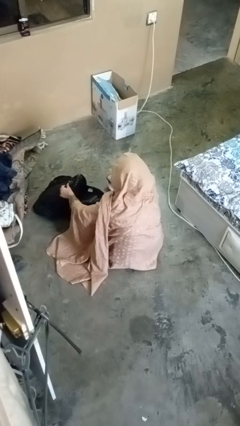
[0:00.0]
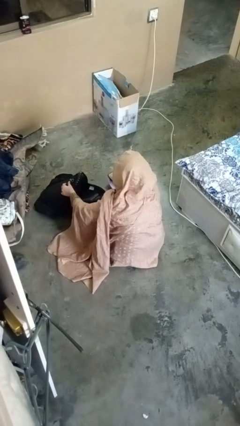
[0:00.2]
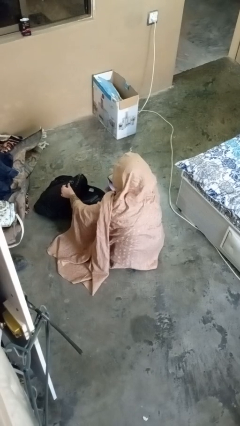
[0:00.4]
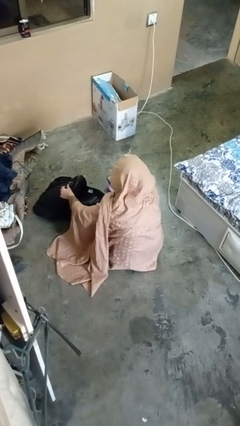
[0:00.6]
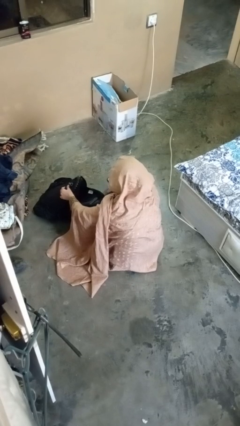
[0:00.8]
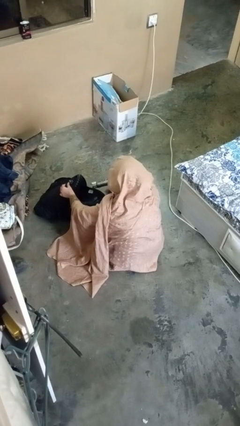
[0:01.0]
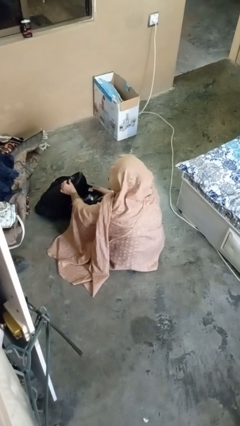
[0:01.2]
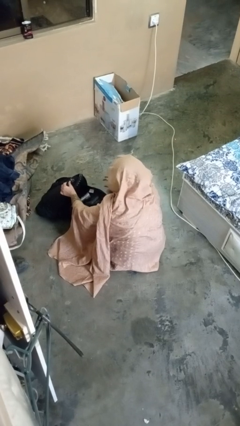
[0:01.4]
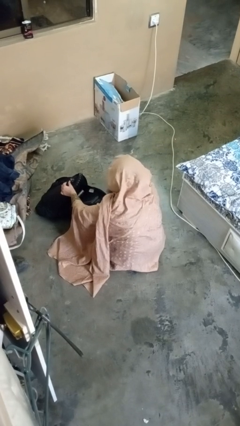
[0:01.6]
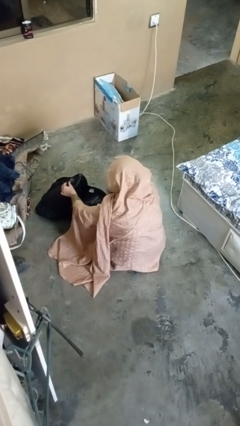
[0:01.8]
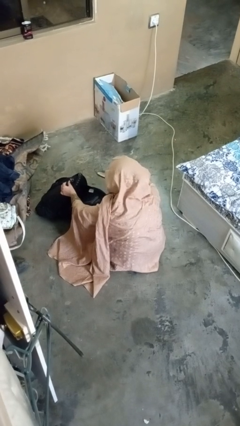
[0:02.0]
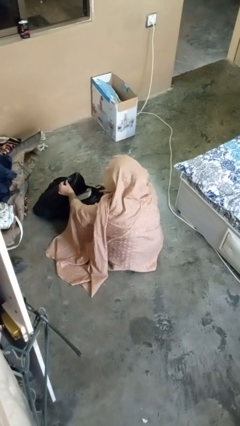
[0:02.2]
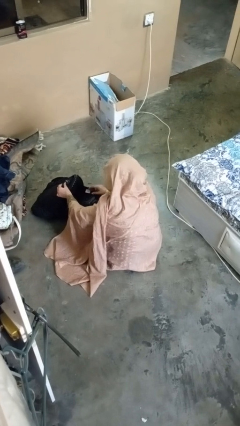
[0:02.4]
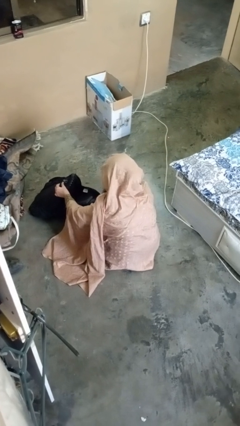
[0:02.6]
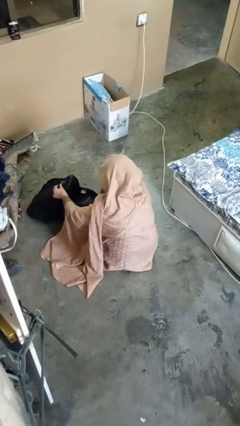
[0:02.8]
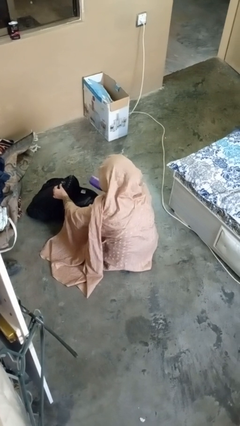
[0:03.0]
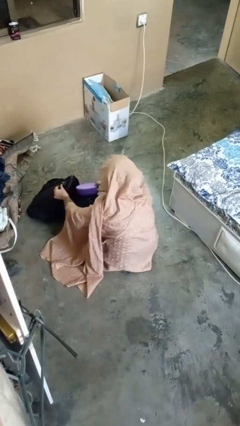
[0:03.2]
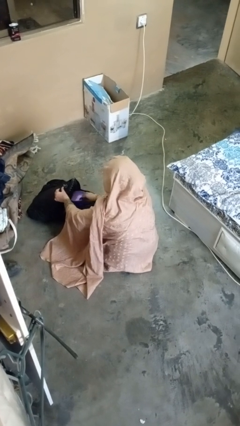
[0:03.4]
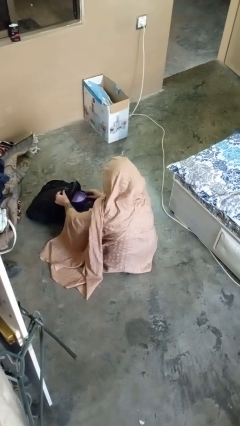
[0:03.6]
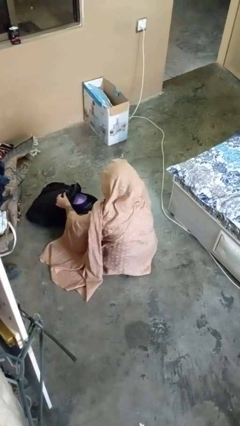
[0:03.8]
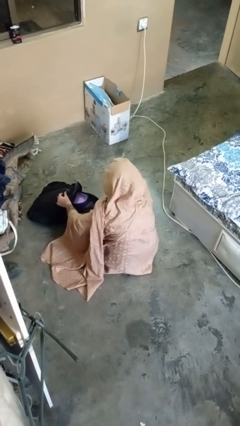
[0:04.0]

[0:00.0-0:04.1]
person puts object into backpack

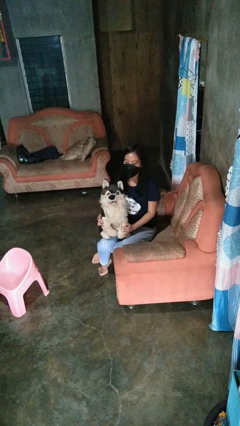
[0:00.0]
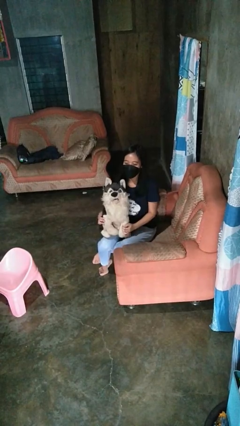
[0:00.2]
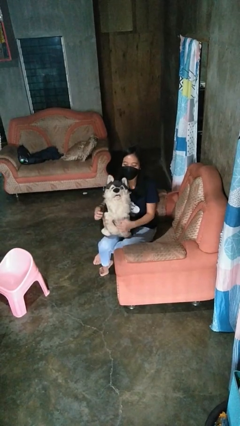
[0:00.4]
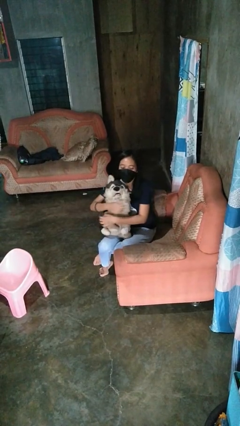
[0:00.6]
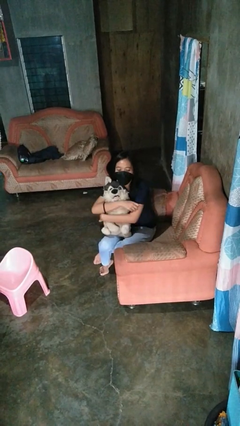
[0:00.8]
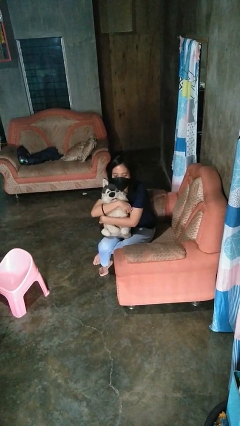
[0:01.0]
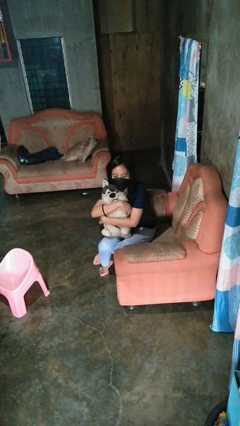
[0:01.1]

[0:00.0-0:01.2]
person hugs stuffed animal

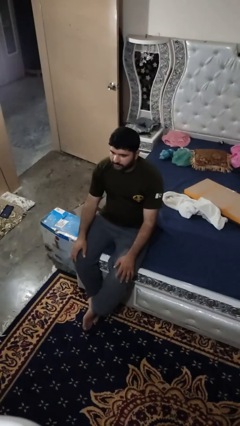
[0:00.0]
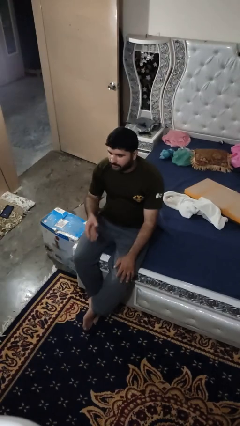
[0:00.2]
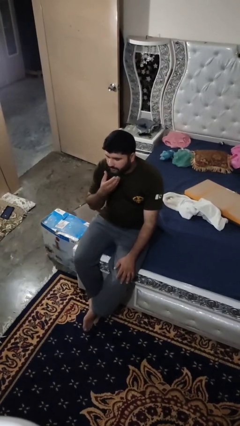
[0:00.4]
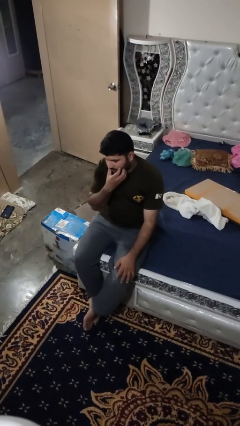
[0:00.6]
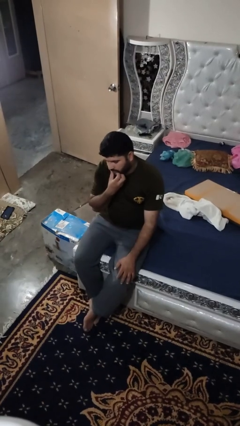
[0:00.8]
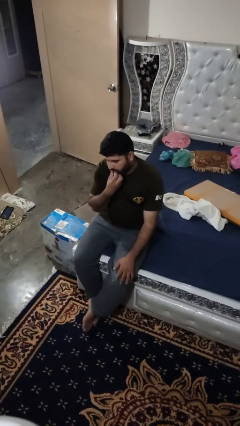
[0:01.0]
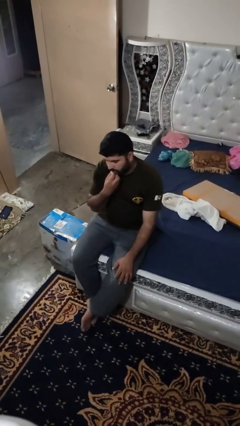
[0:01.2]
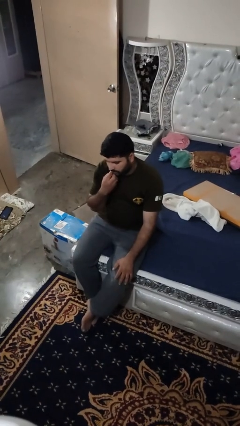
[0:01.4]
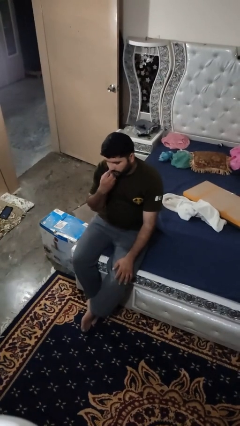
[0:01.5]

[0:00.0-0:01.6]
person strokes chin

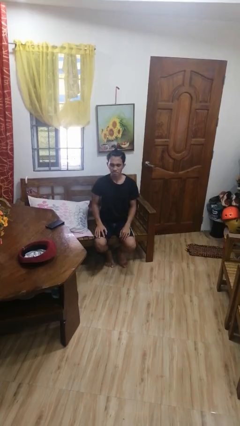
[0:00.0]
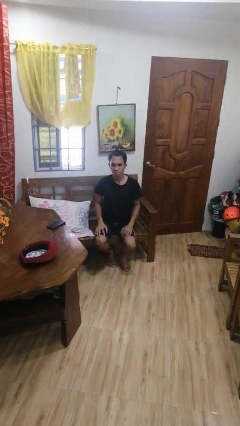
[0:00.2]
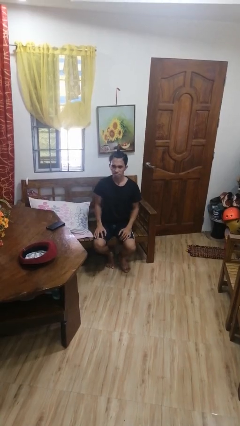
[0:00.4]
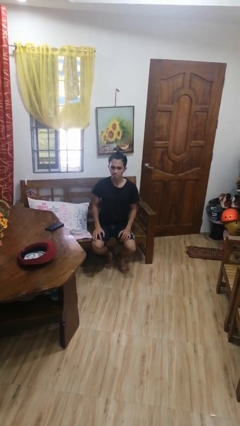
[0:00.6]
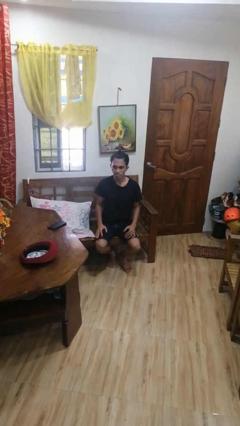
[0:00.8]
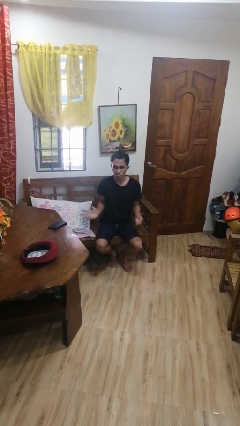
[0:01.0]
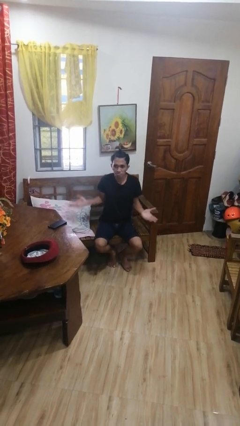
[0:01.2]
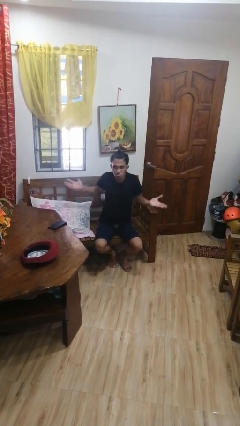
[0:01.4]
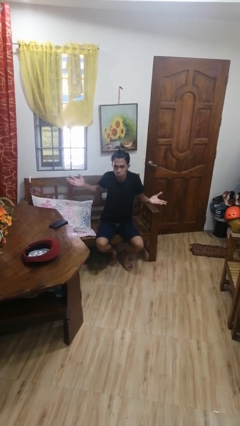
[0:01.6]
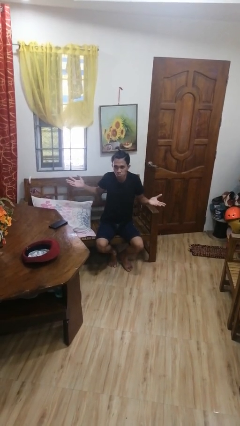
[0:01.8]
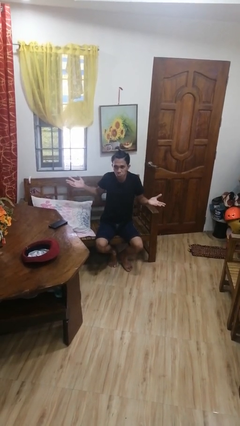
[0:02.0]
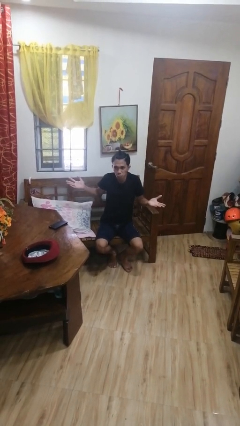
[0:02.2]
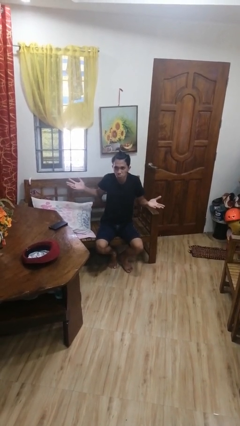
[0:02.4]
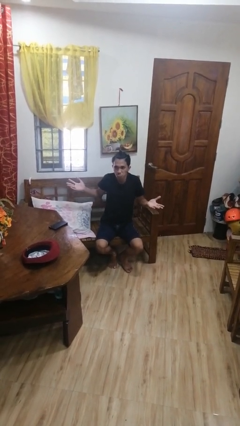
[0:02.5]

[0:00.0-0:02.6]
person shrugs

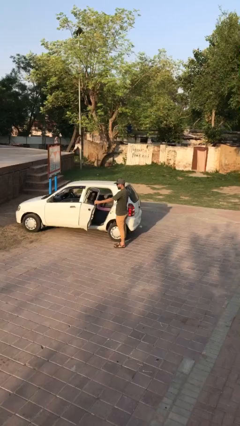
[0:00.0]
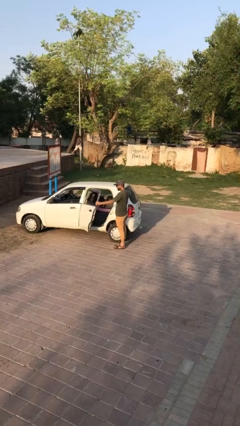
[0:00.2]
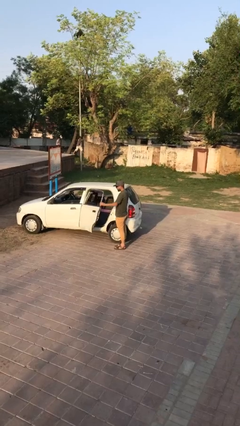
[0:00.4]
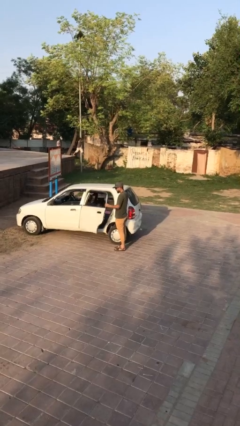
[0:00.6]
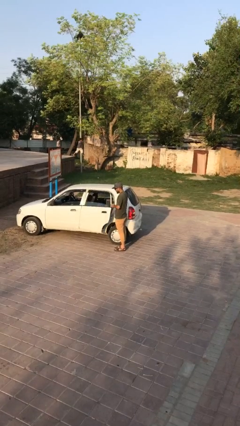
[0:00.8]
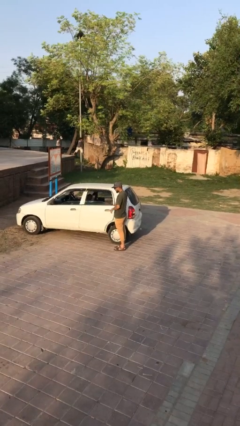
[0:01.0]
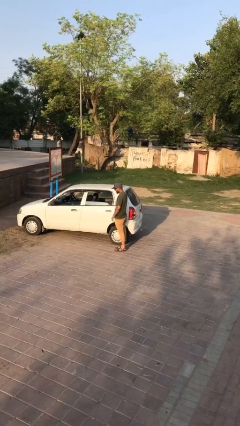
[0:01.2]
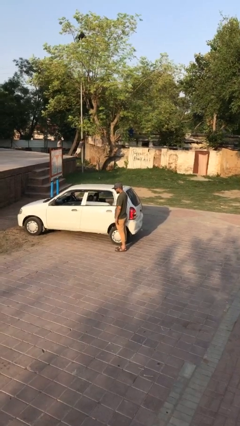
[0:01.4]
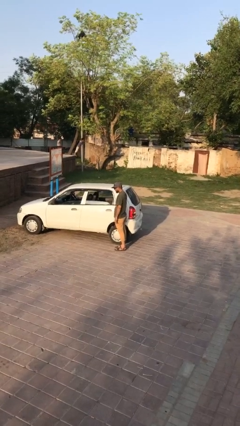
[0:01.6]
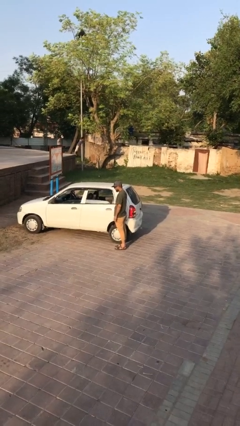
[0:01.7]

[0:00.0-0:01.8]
person closes car door

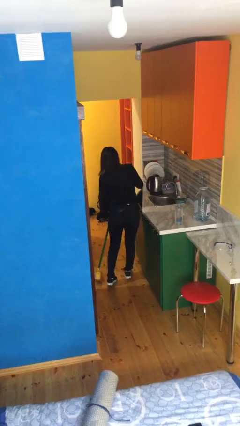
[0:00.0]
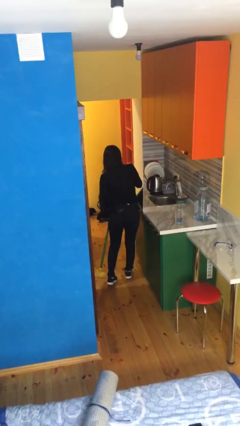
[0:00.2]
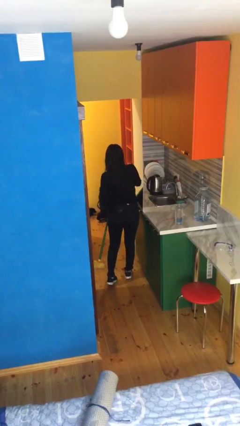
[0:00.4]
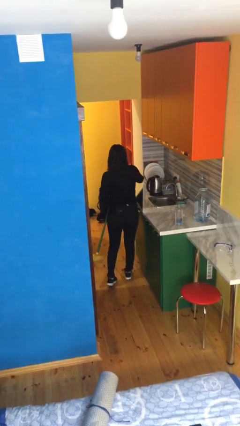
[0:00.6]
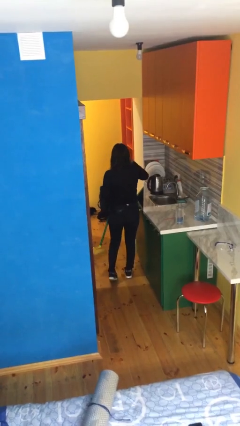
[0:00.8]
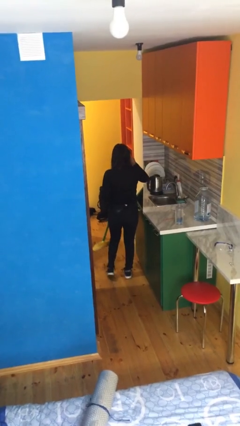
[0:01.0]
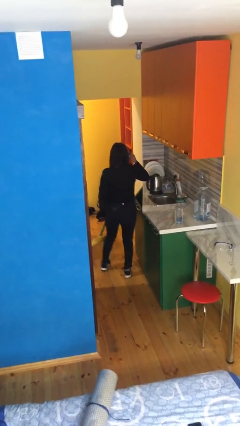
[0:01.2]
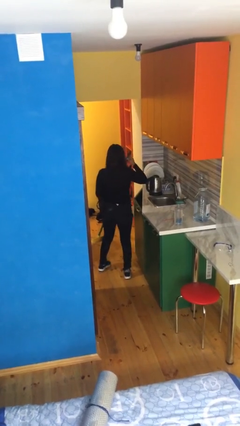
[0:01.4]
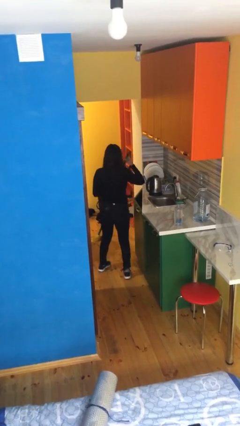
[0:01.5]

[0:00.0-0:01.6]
person sweeps floor

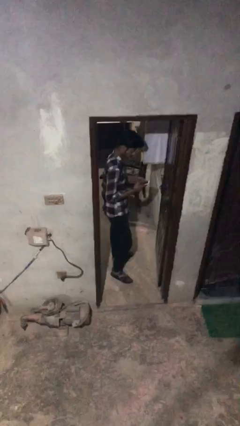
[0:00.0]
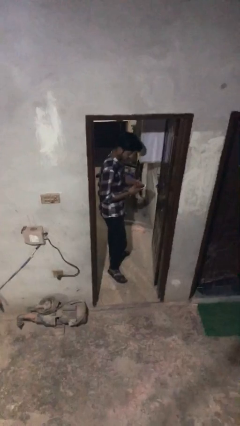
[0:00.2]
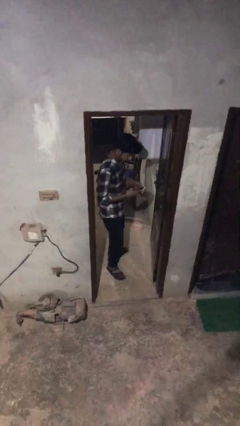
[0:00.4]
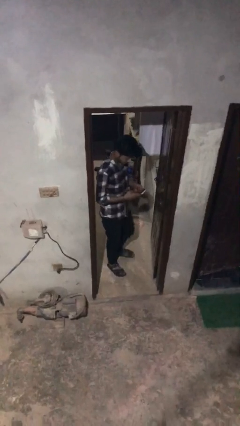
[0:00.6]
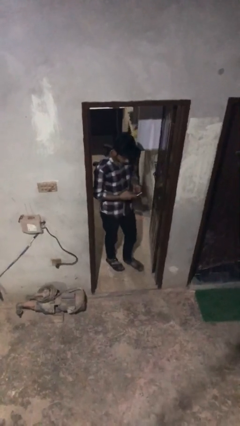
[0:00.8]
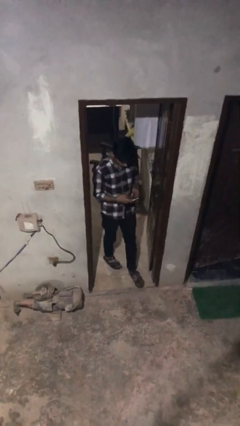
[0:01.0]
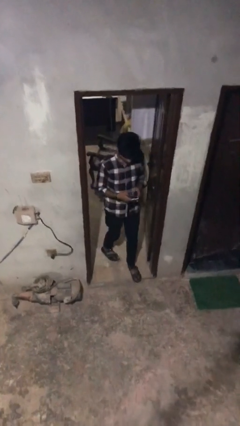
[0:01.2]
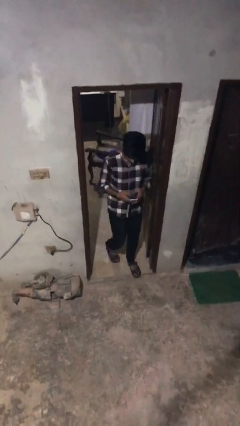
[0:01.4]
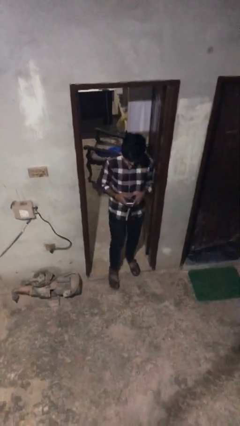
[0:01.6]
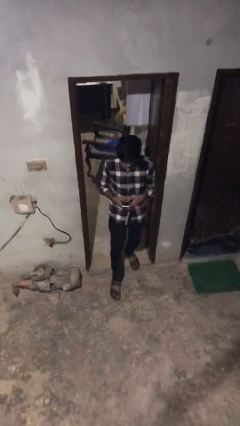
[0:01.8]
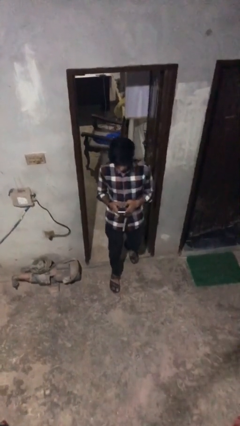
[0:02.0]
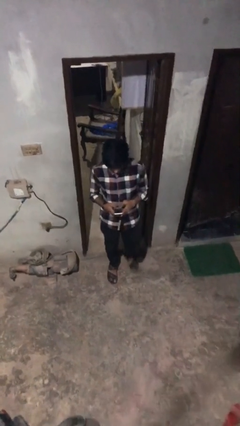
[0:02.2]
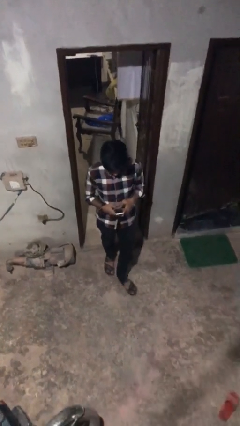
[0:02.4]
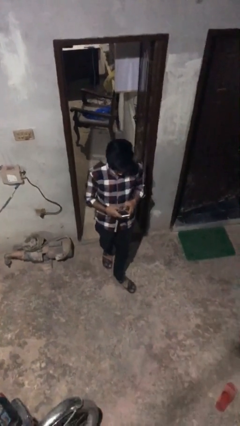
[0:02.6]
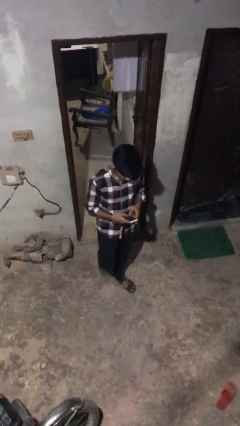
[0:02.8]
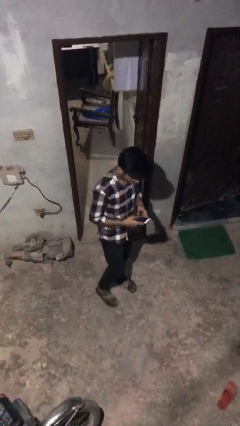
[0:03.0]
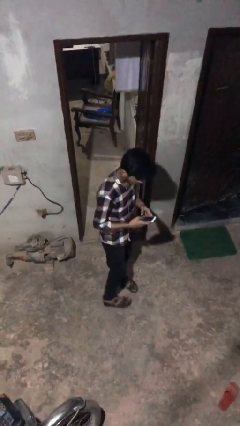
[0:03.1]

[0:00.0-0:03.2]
person enters scene through structure

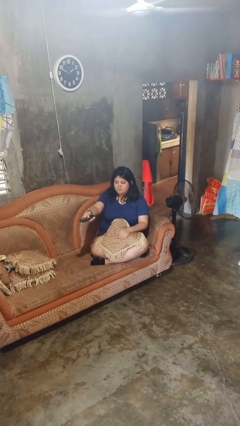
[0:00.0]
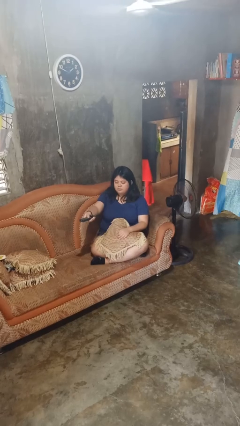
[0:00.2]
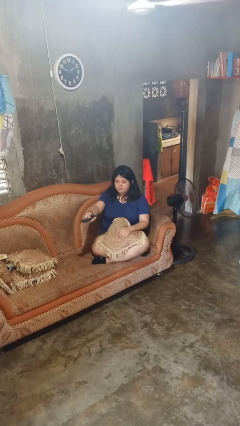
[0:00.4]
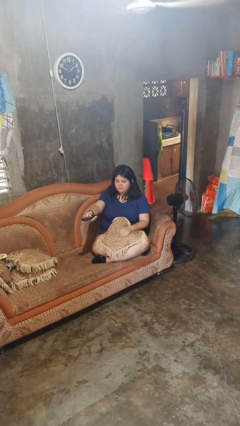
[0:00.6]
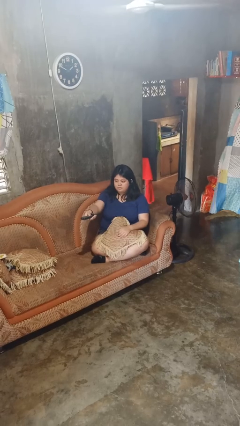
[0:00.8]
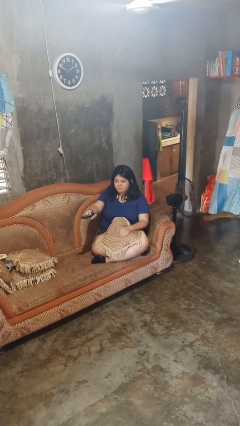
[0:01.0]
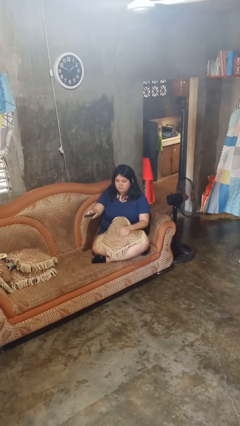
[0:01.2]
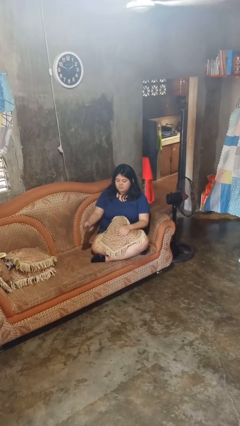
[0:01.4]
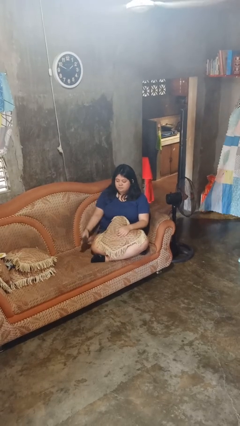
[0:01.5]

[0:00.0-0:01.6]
person uses television remote
